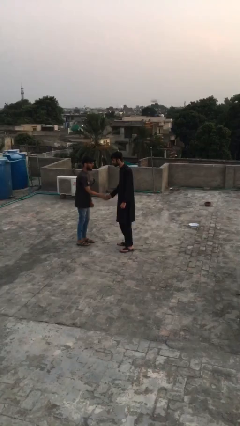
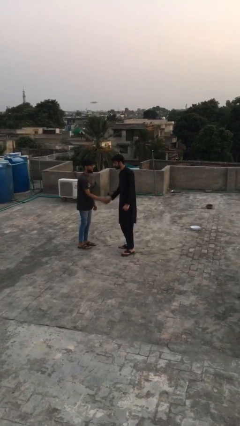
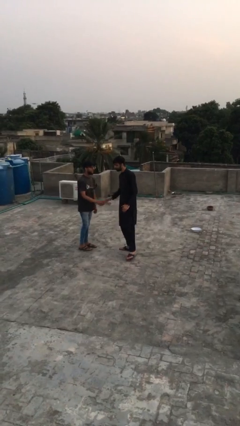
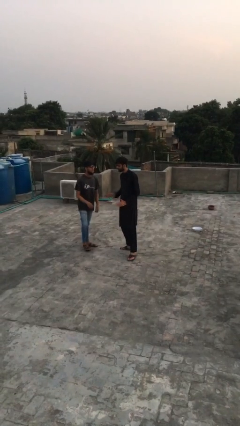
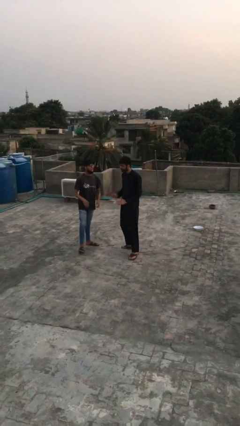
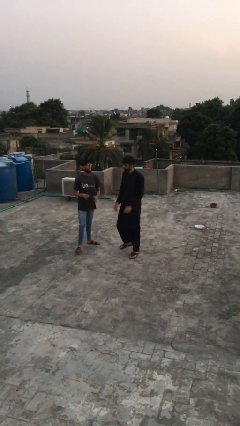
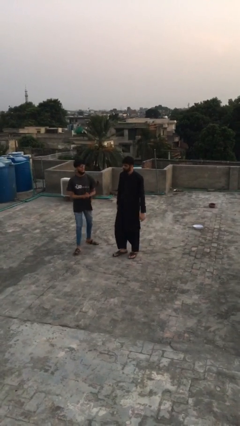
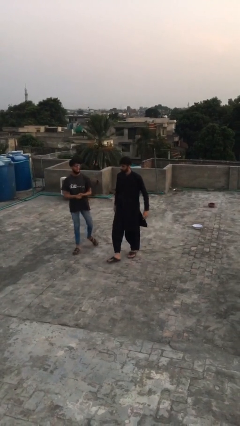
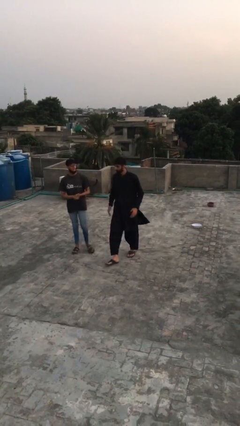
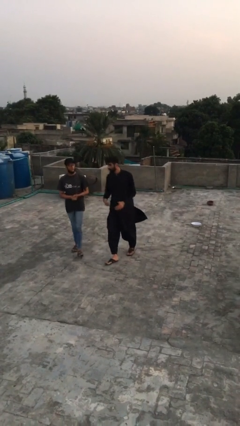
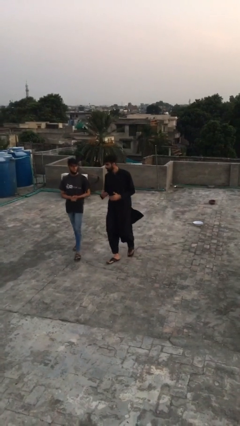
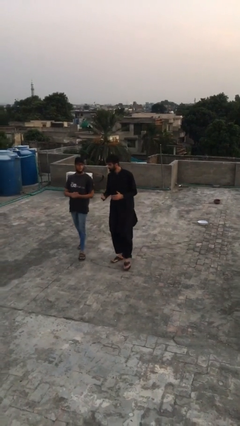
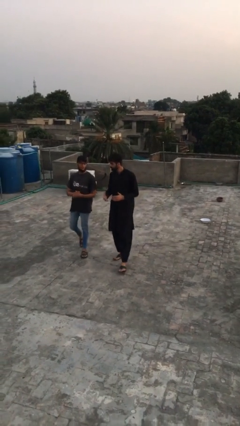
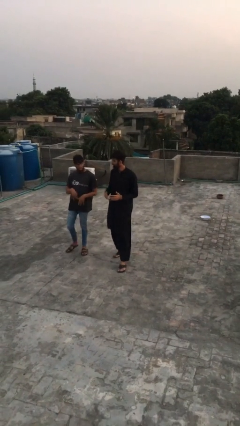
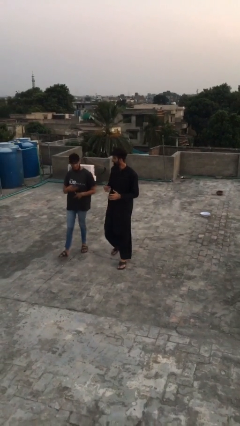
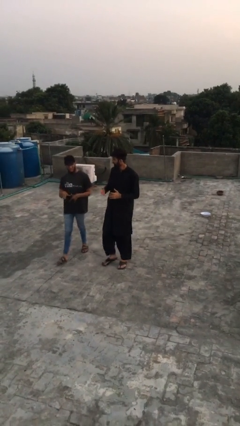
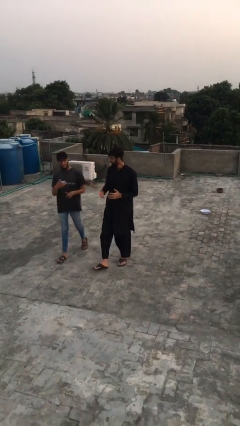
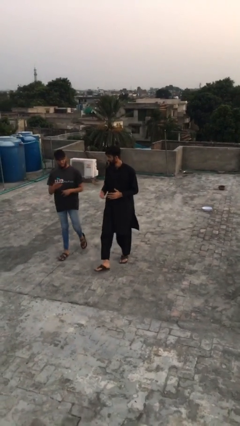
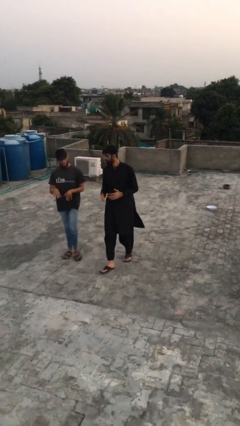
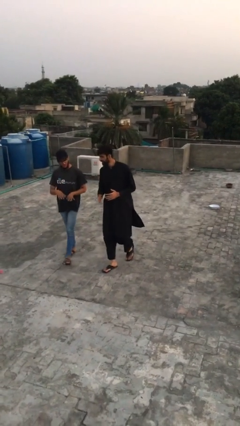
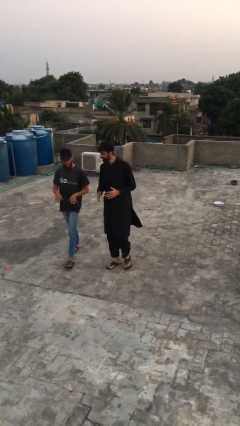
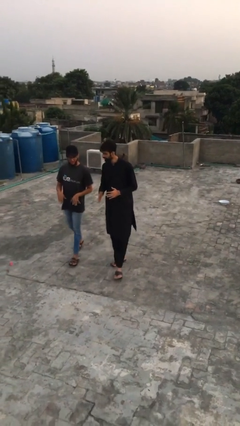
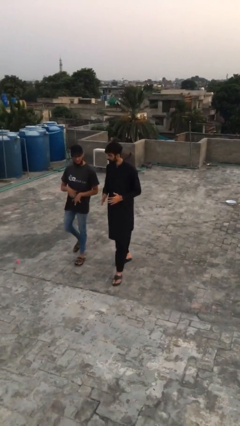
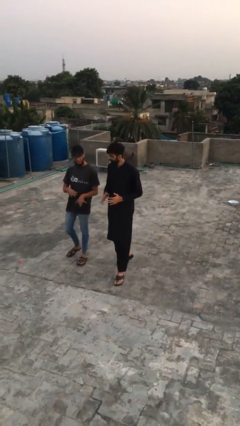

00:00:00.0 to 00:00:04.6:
person talks to person

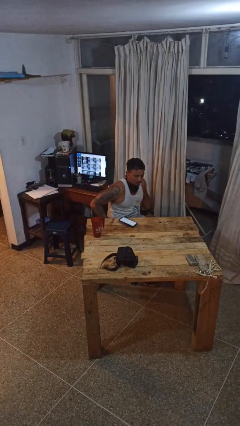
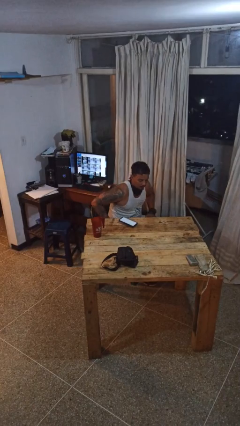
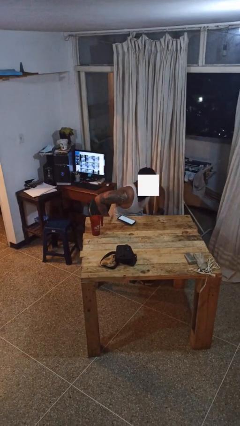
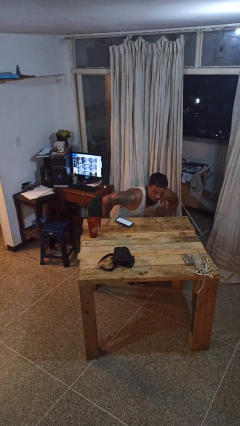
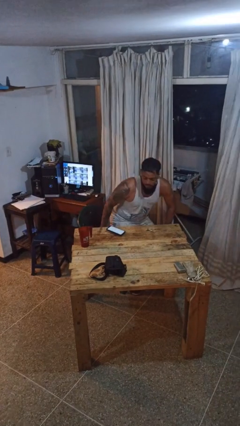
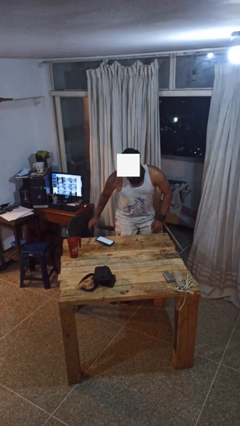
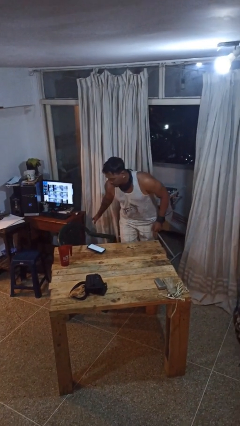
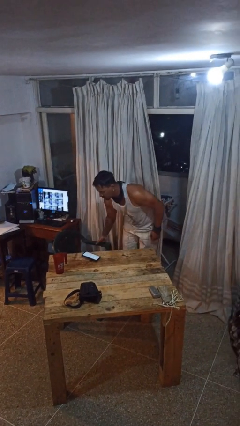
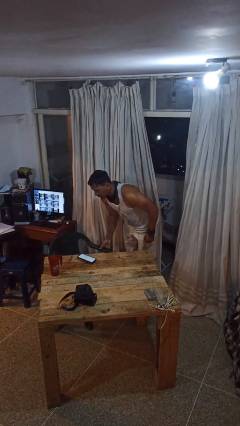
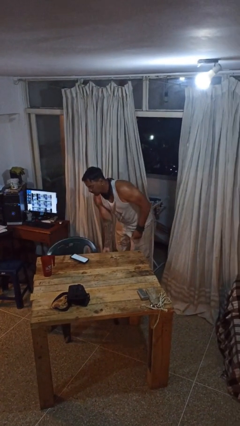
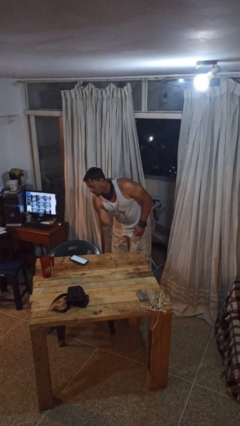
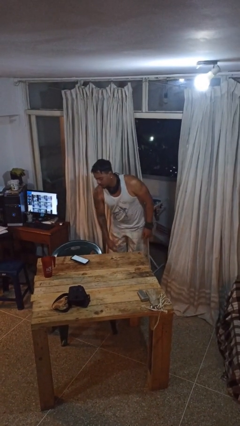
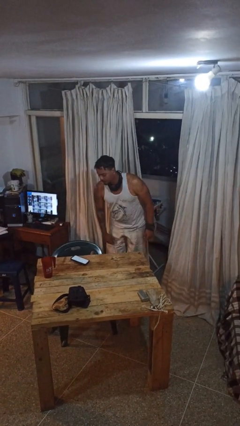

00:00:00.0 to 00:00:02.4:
person stands up

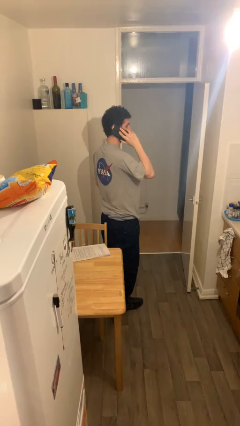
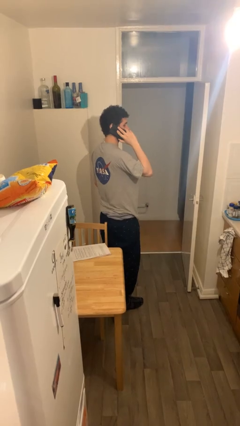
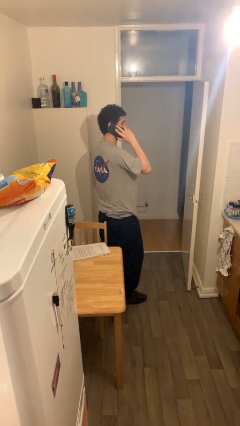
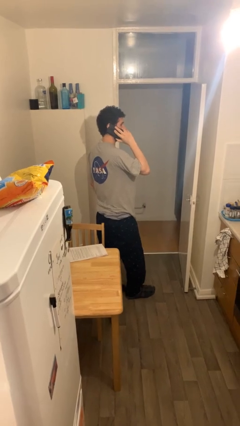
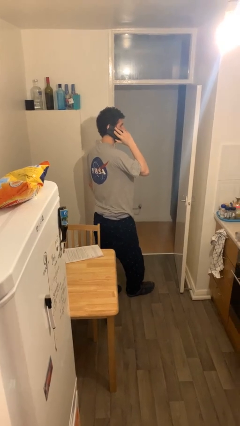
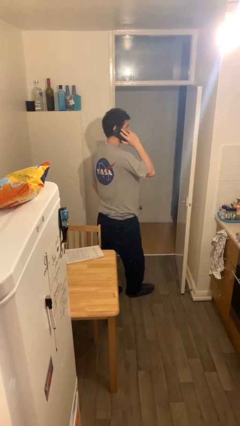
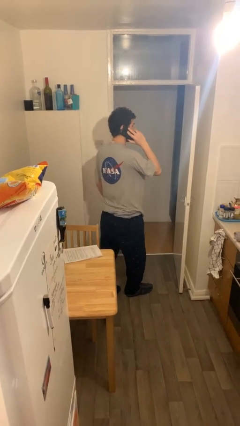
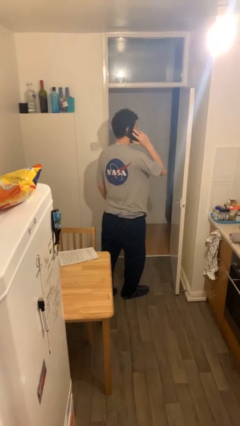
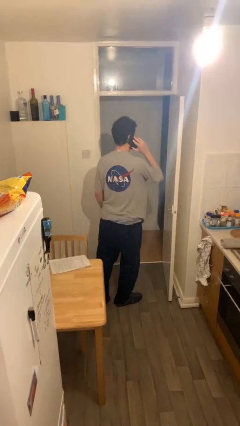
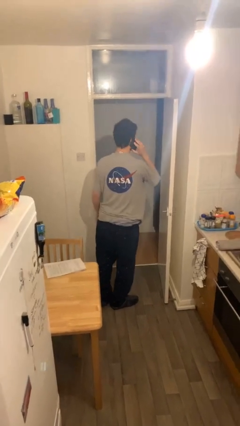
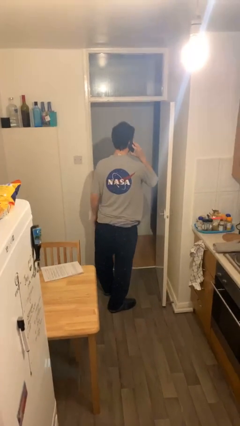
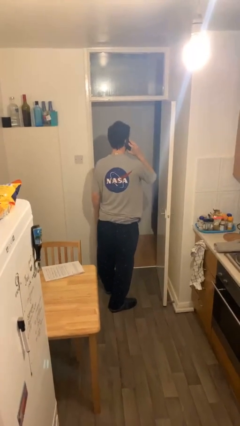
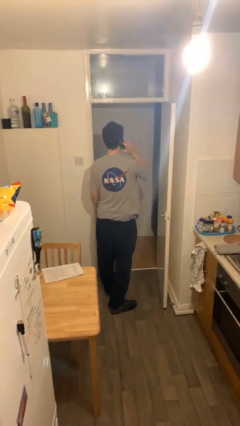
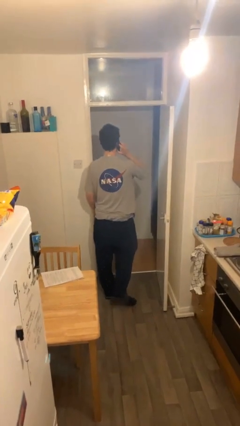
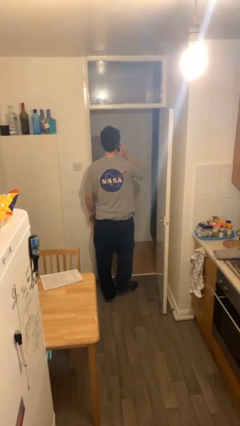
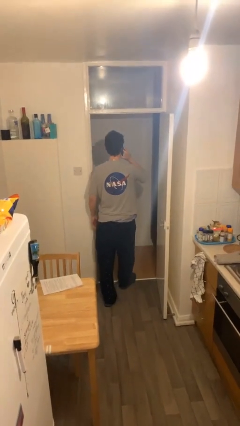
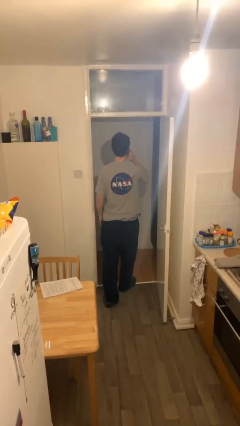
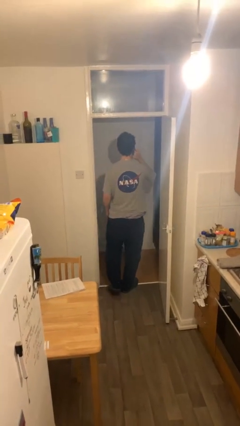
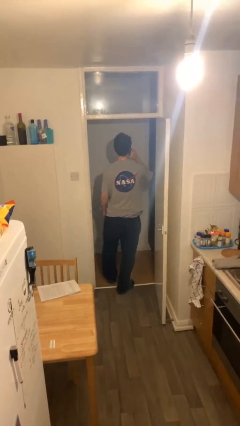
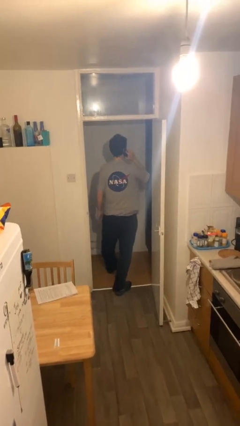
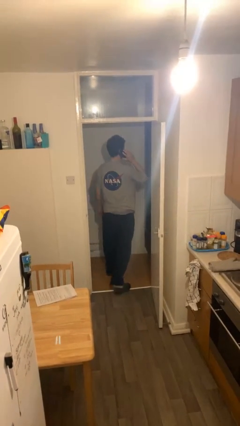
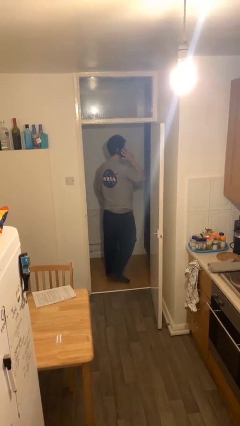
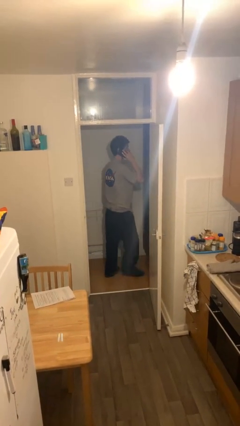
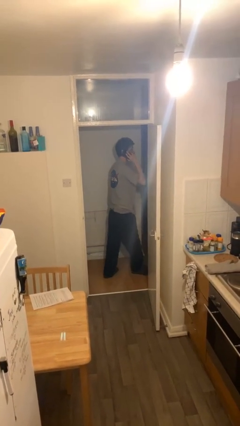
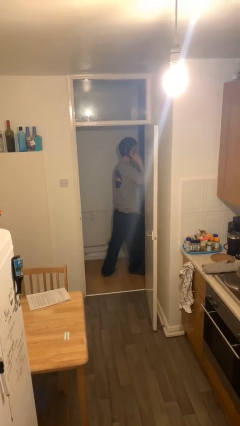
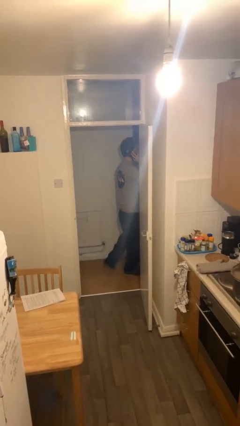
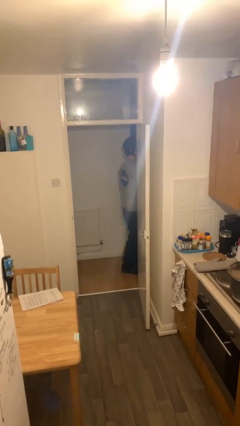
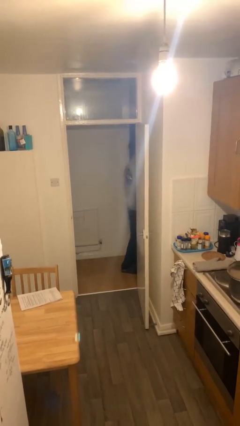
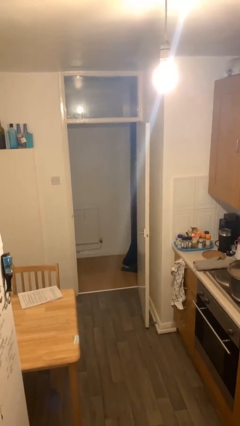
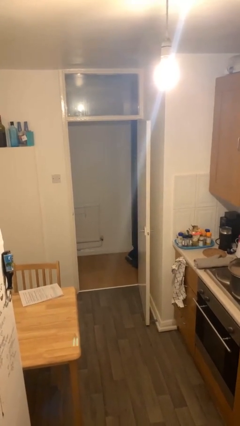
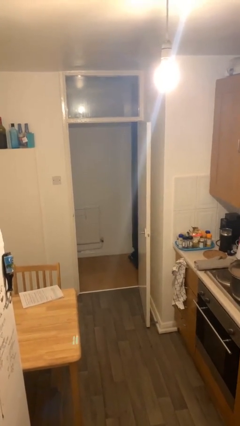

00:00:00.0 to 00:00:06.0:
person exits scene through structure

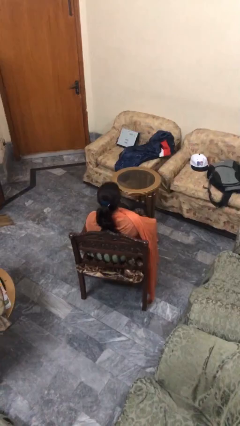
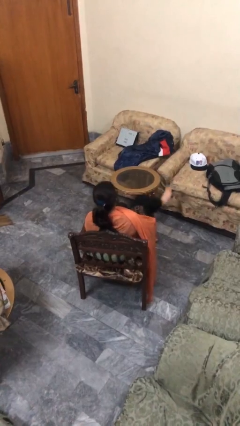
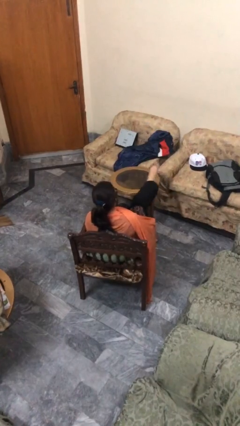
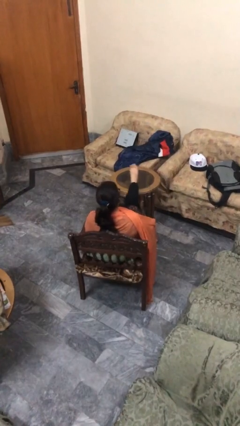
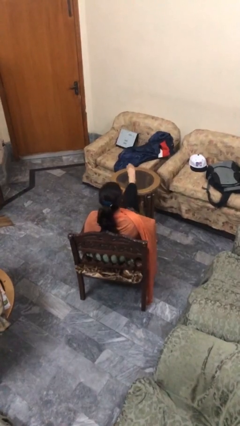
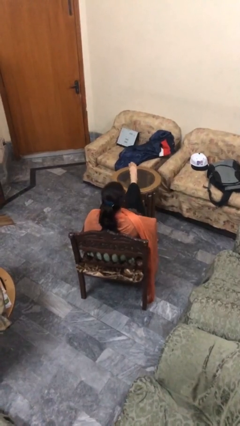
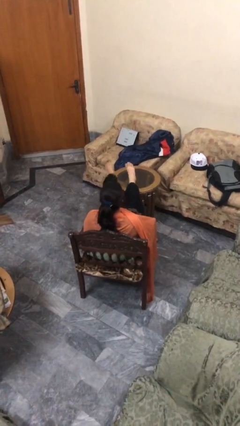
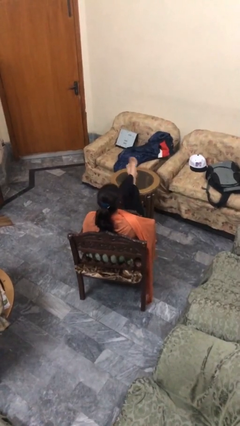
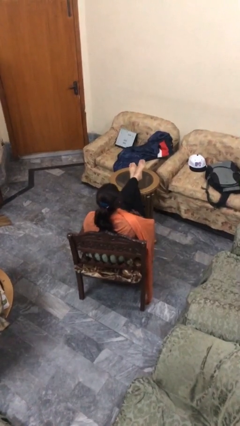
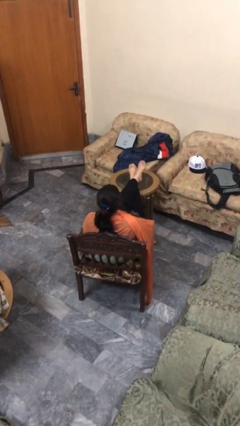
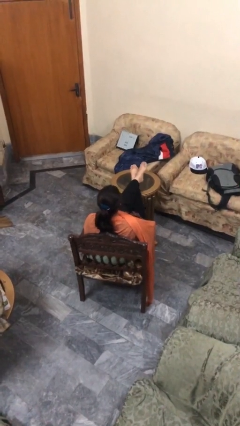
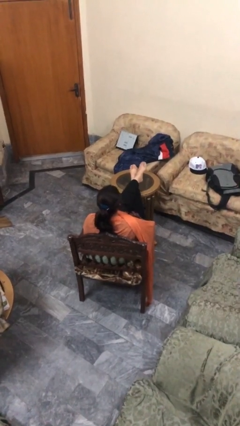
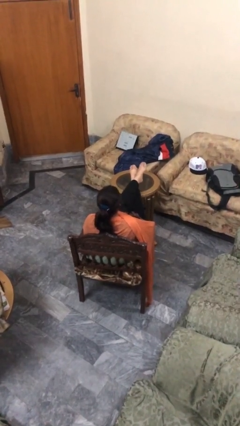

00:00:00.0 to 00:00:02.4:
person puts feet up

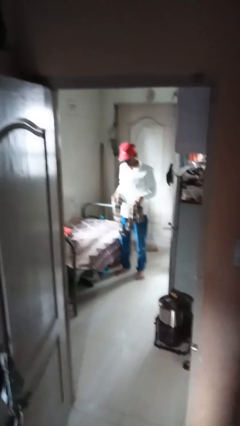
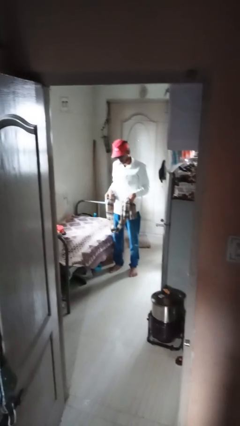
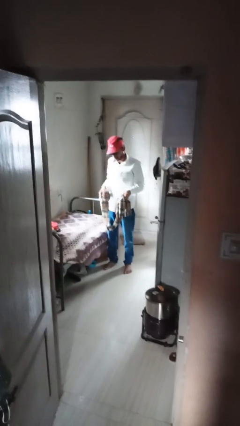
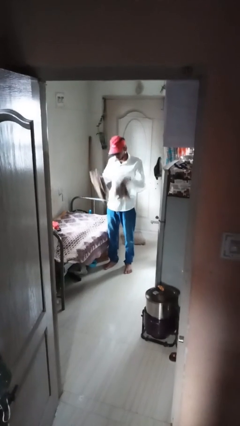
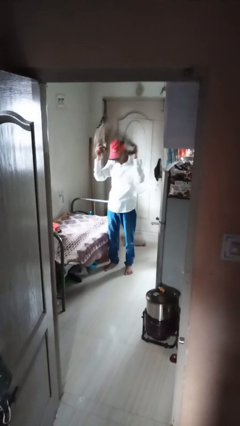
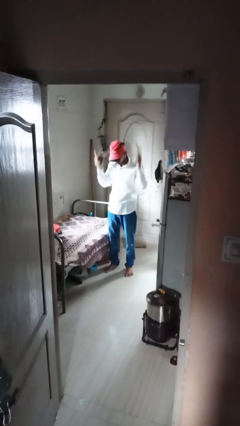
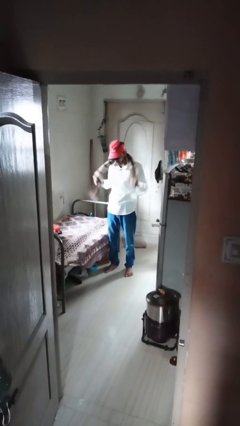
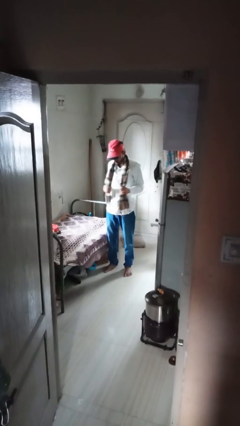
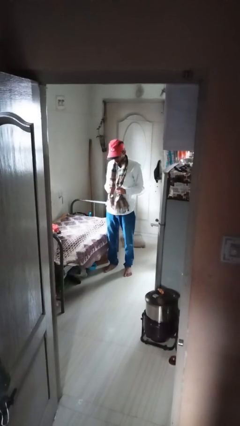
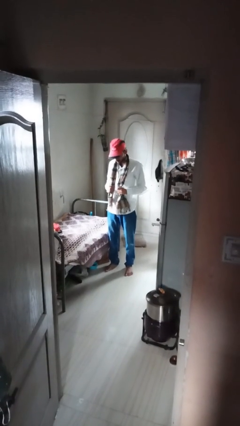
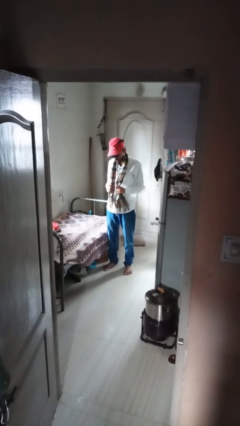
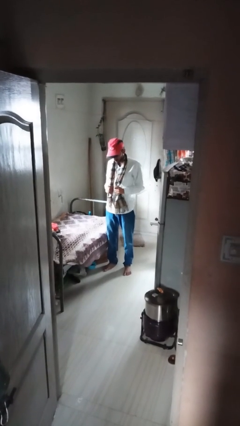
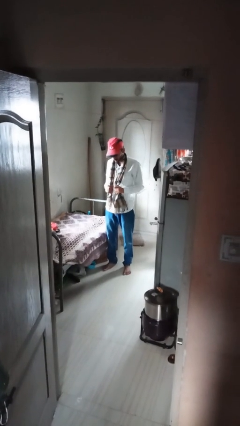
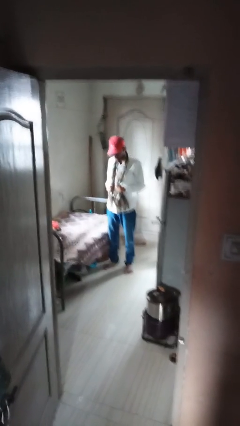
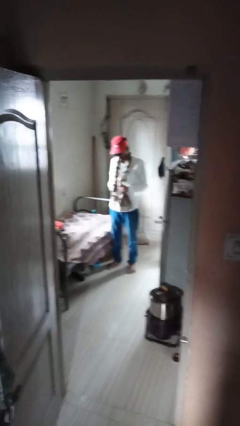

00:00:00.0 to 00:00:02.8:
person puts on scarf
